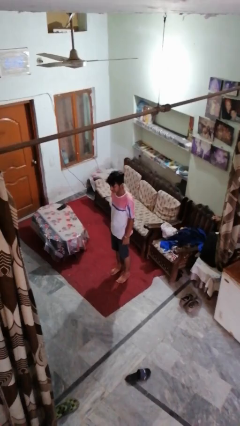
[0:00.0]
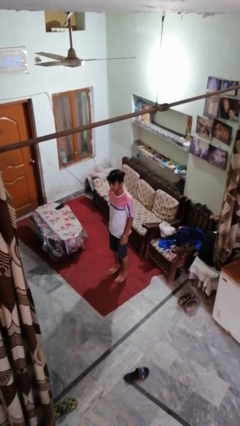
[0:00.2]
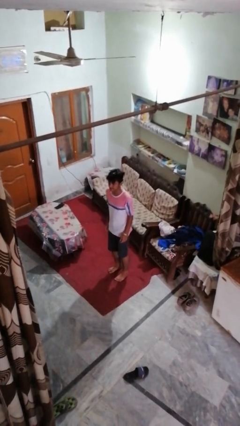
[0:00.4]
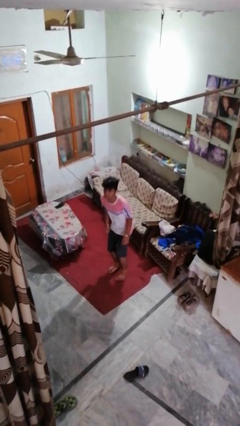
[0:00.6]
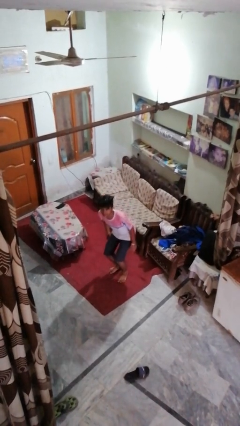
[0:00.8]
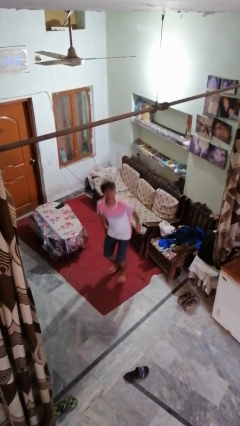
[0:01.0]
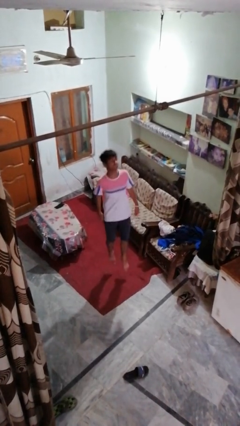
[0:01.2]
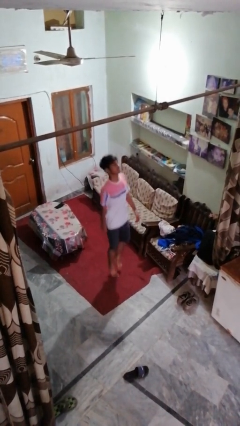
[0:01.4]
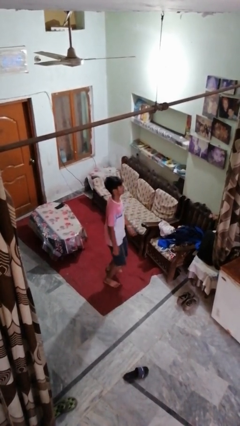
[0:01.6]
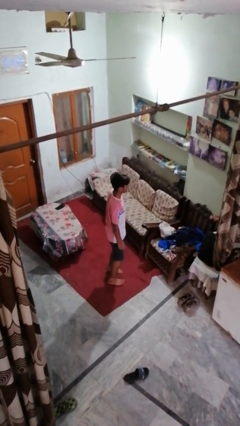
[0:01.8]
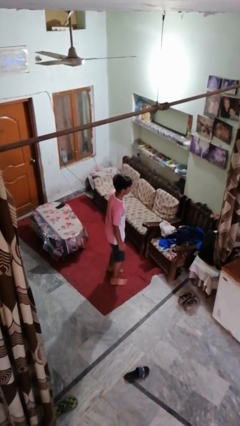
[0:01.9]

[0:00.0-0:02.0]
person jumps

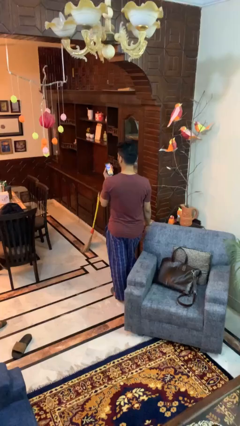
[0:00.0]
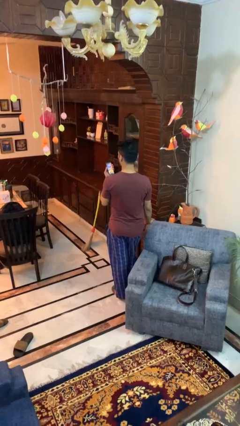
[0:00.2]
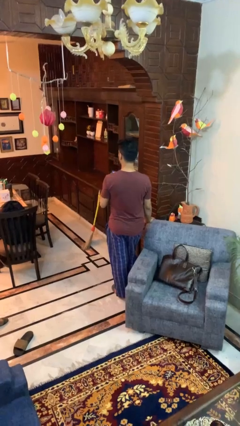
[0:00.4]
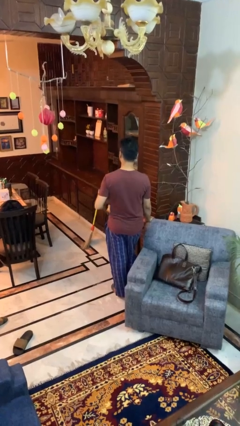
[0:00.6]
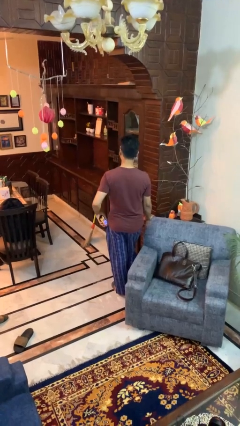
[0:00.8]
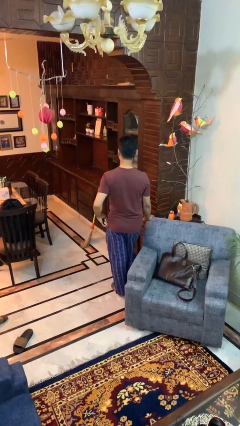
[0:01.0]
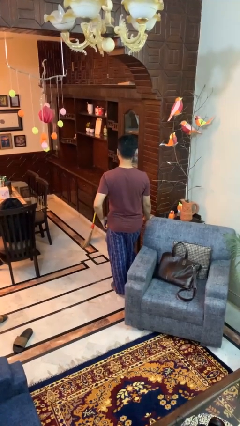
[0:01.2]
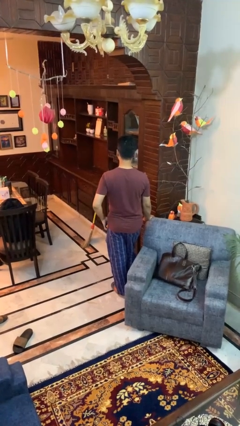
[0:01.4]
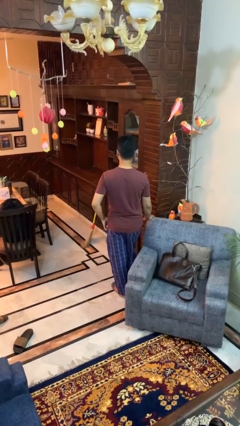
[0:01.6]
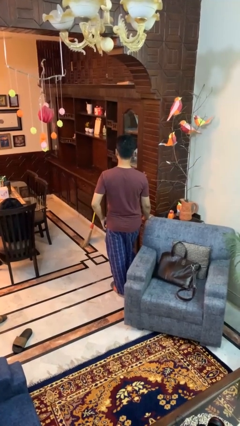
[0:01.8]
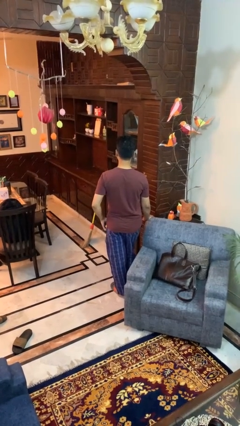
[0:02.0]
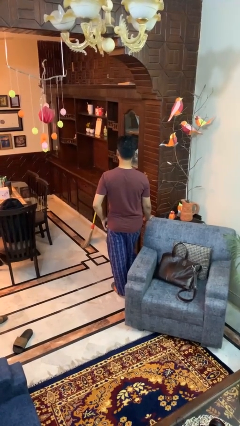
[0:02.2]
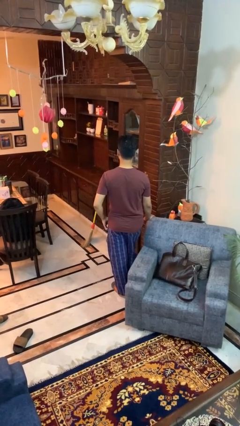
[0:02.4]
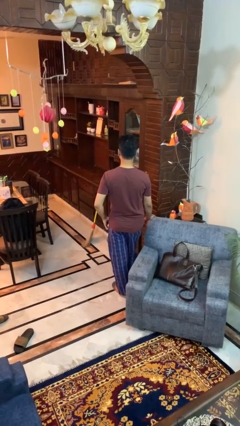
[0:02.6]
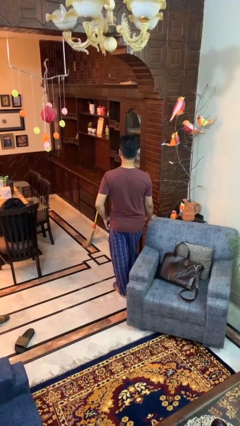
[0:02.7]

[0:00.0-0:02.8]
person puts phone into pocket

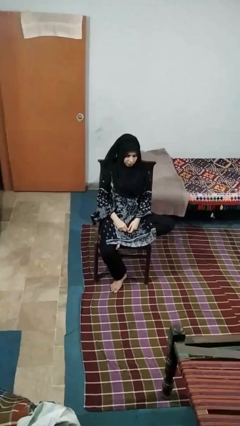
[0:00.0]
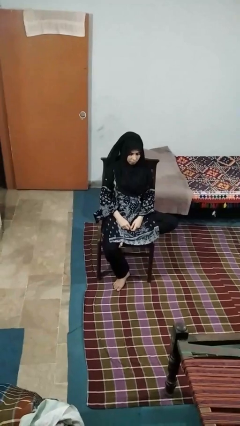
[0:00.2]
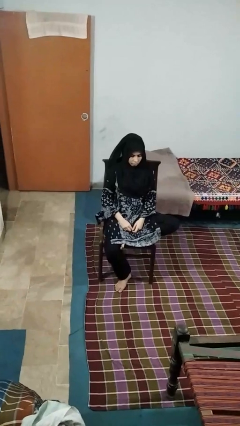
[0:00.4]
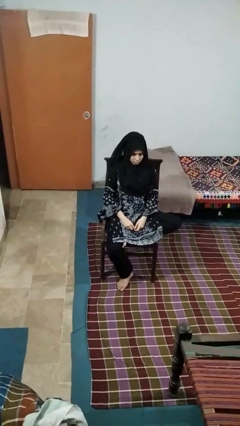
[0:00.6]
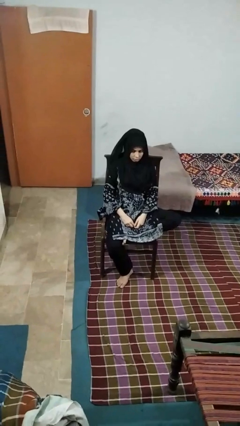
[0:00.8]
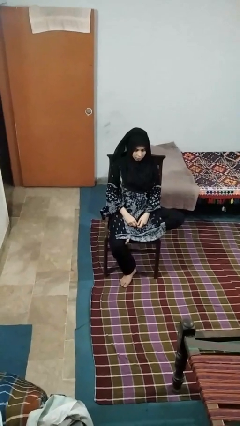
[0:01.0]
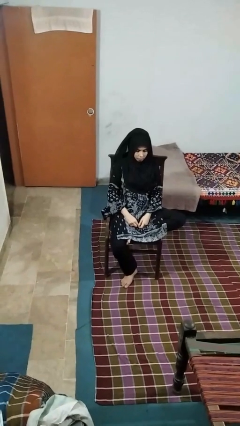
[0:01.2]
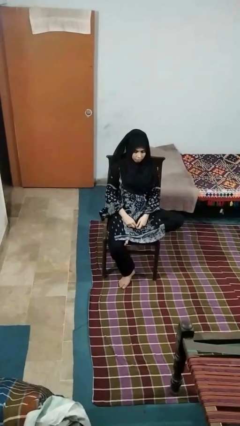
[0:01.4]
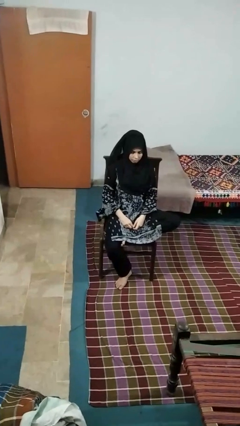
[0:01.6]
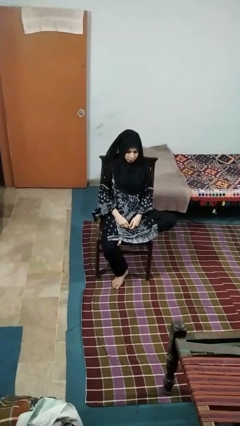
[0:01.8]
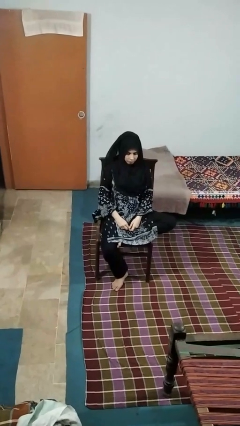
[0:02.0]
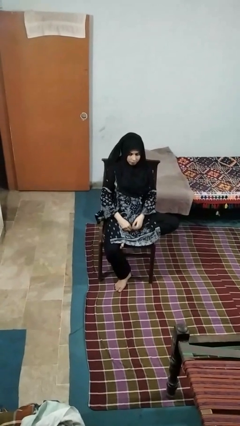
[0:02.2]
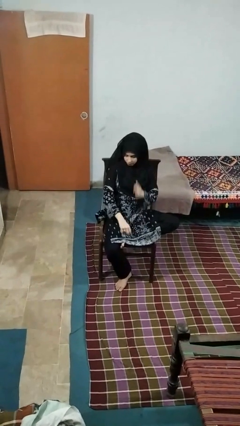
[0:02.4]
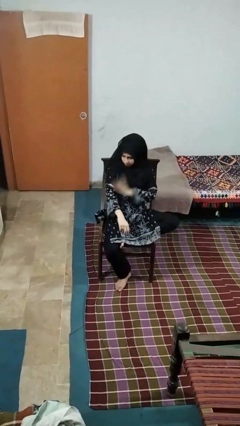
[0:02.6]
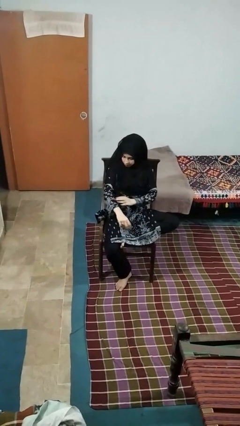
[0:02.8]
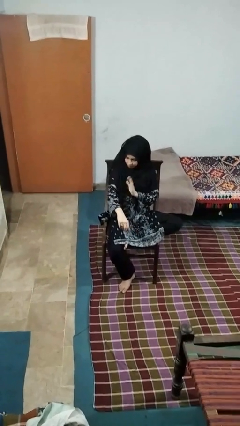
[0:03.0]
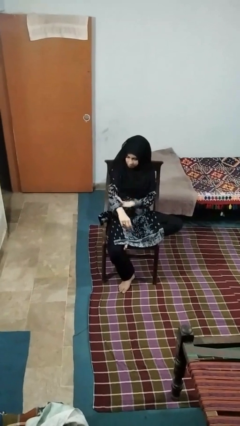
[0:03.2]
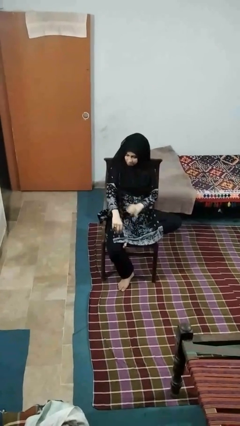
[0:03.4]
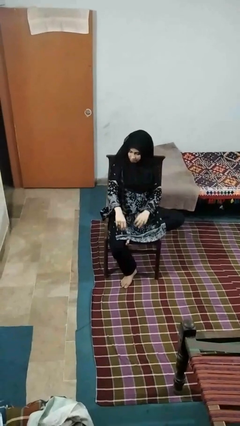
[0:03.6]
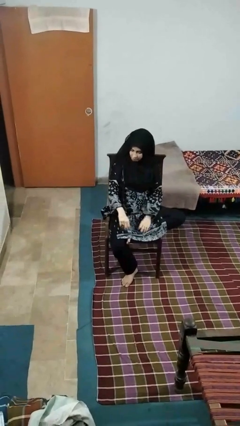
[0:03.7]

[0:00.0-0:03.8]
person swats bug

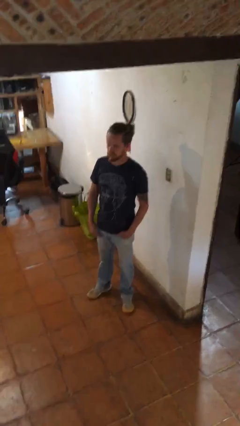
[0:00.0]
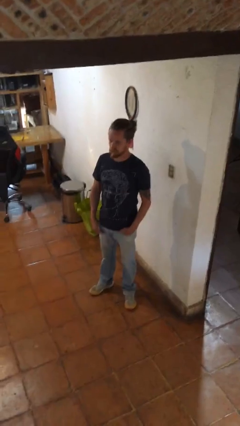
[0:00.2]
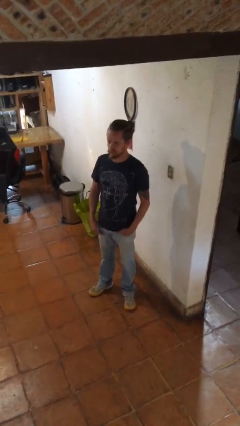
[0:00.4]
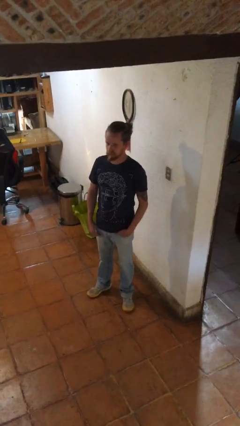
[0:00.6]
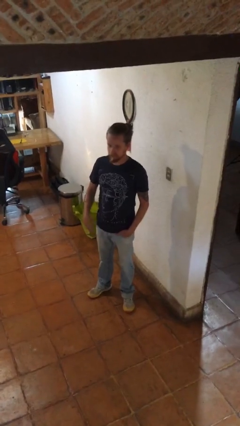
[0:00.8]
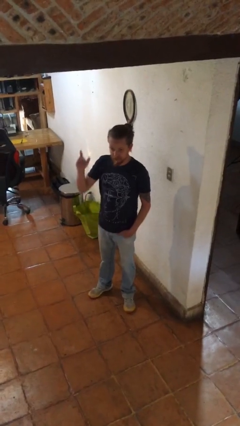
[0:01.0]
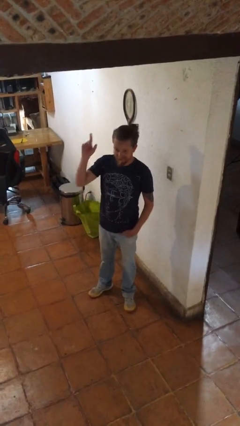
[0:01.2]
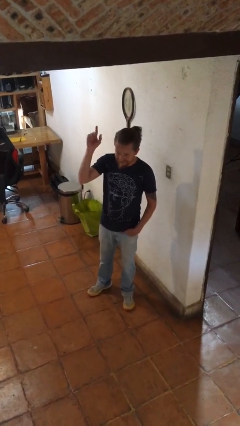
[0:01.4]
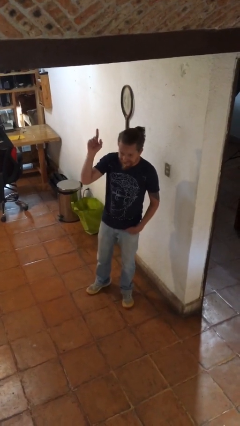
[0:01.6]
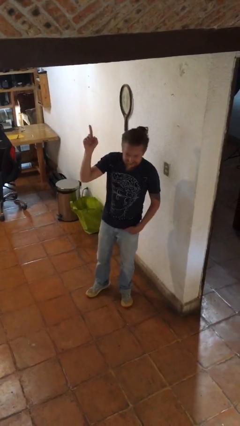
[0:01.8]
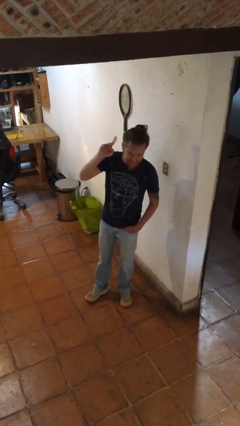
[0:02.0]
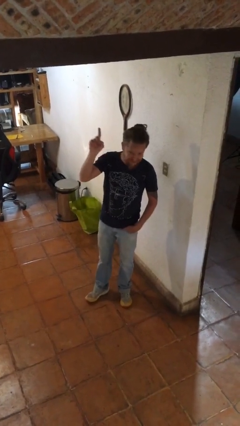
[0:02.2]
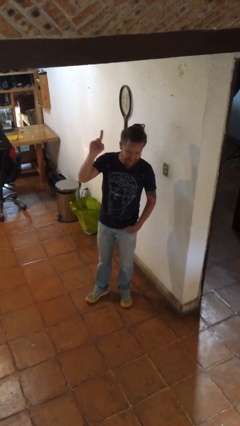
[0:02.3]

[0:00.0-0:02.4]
person gestures raise hand

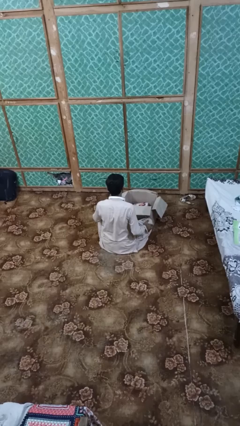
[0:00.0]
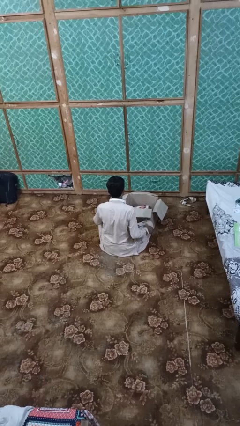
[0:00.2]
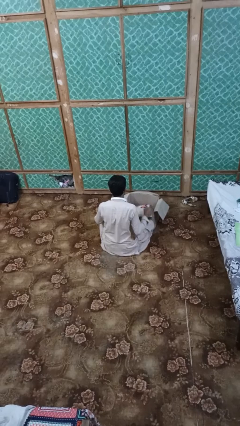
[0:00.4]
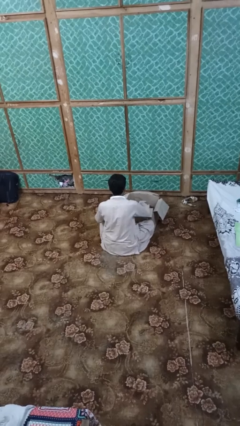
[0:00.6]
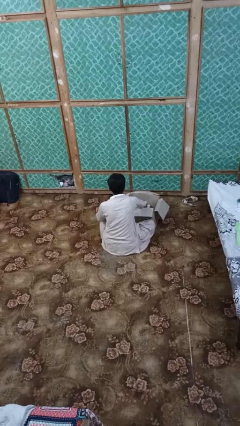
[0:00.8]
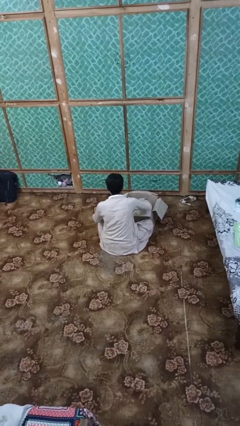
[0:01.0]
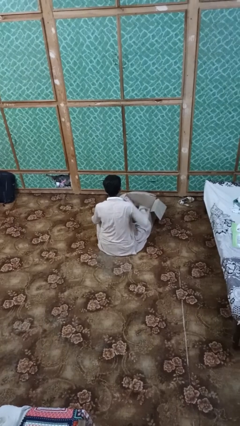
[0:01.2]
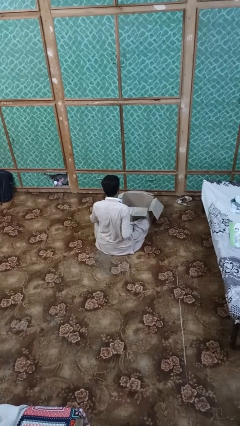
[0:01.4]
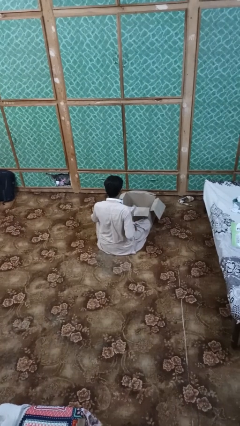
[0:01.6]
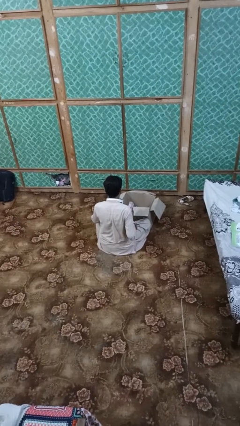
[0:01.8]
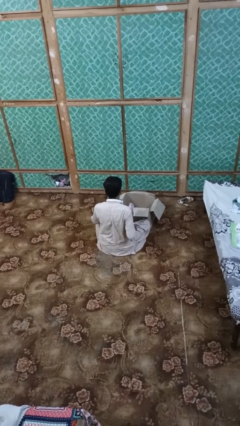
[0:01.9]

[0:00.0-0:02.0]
person takes object from box

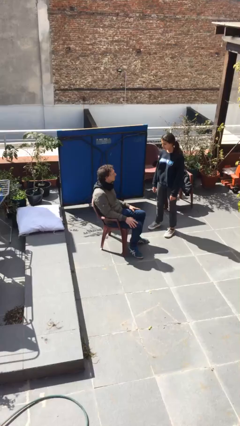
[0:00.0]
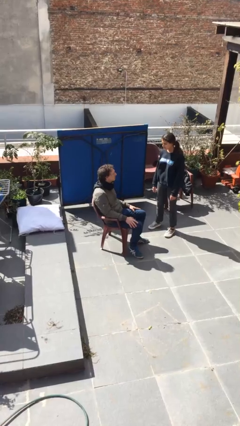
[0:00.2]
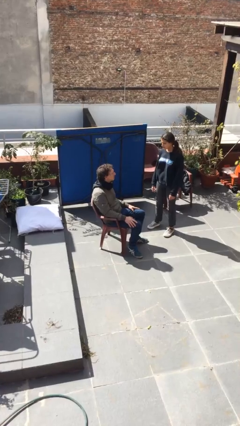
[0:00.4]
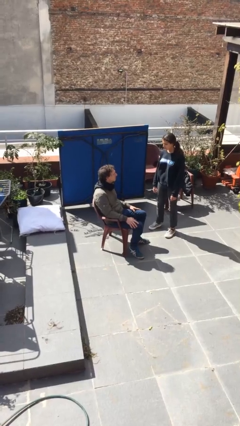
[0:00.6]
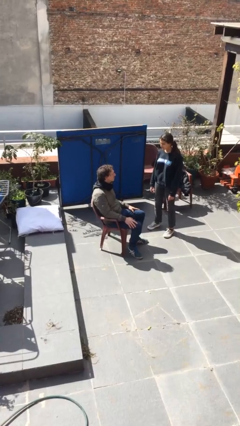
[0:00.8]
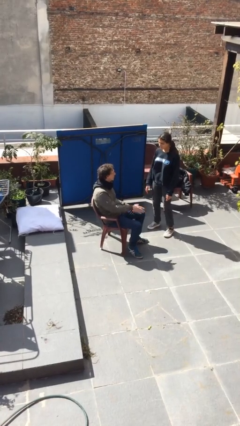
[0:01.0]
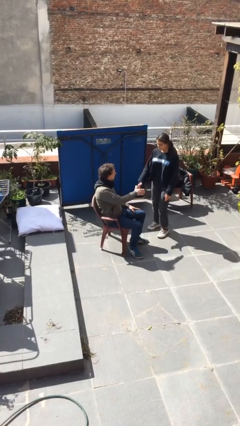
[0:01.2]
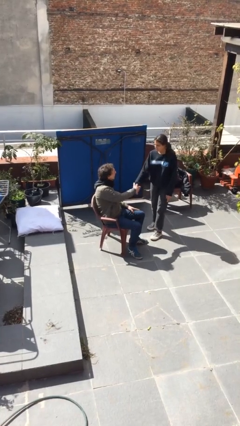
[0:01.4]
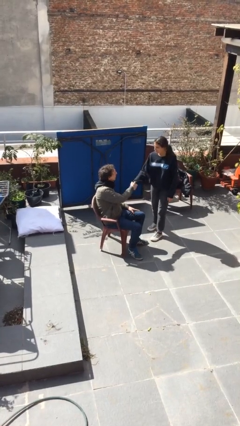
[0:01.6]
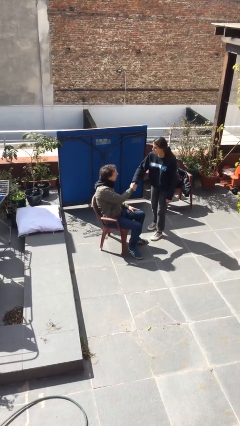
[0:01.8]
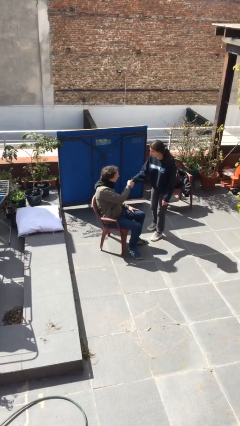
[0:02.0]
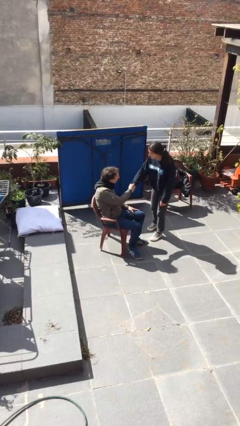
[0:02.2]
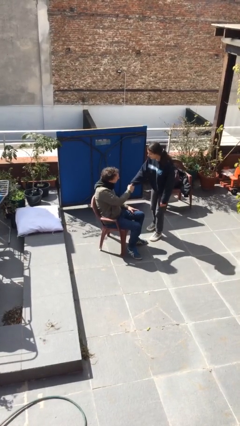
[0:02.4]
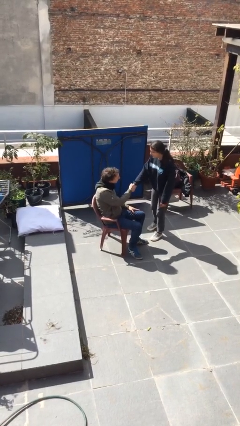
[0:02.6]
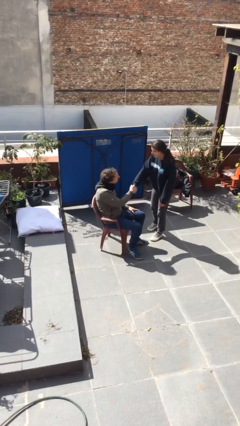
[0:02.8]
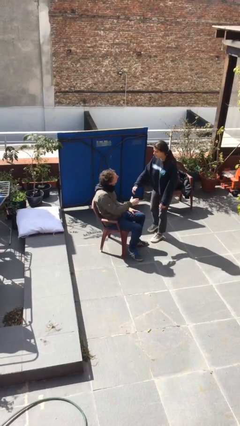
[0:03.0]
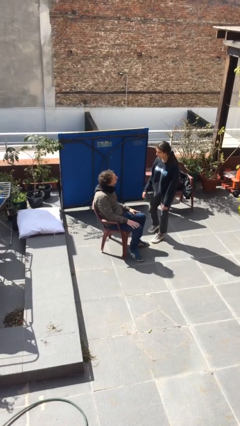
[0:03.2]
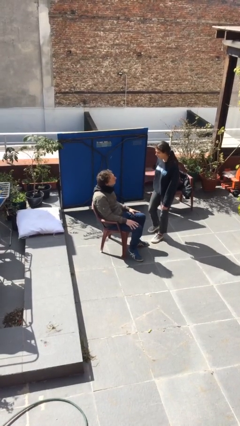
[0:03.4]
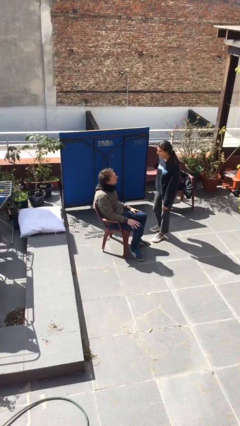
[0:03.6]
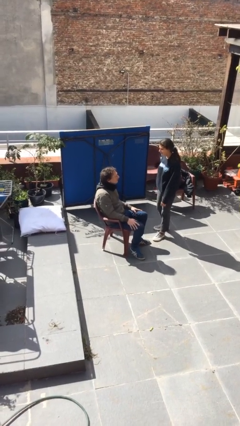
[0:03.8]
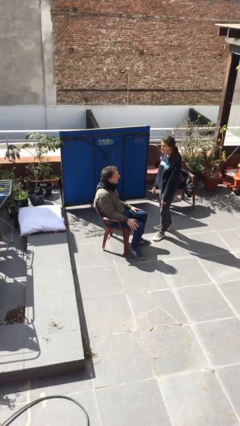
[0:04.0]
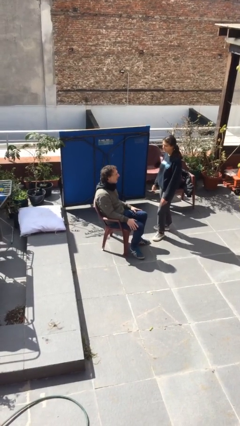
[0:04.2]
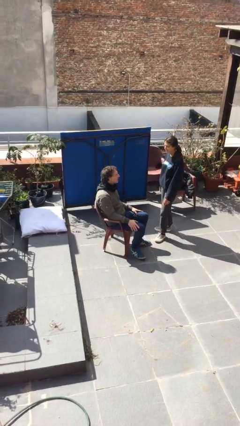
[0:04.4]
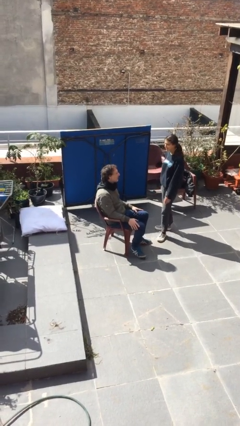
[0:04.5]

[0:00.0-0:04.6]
person shakes hand
